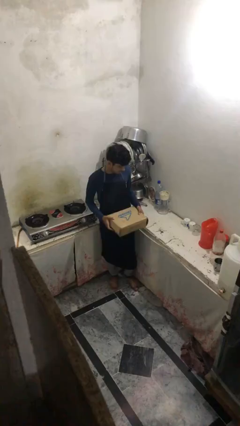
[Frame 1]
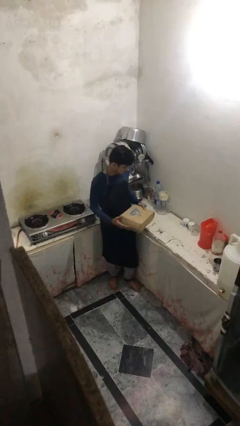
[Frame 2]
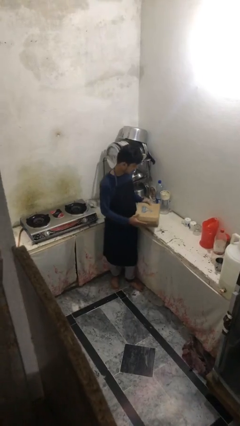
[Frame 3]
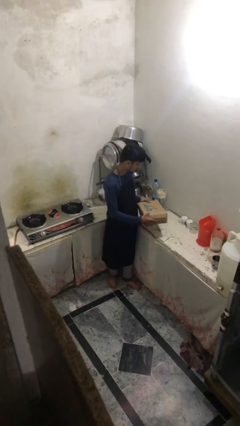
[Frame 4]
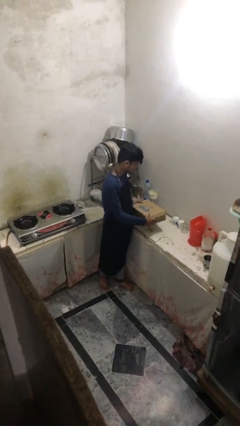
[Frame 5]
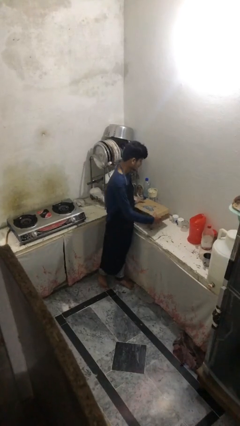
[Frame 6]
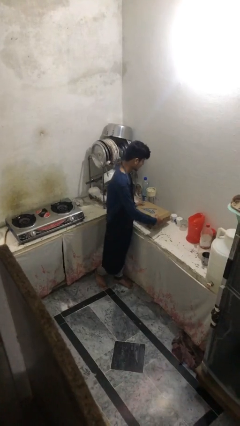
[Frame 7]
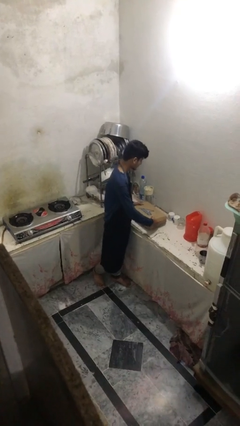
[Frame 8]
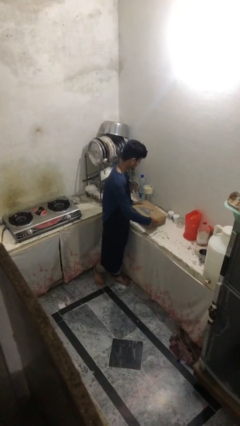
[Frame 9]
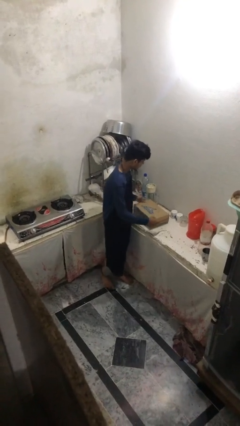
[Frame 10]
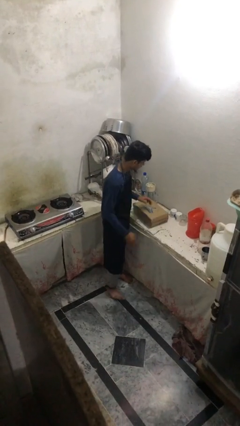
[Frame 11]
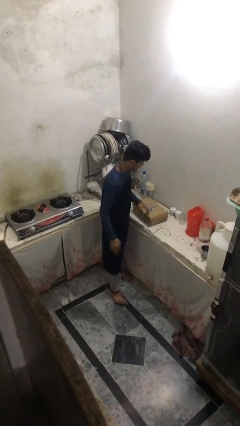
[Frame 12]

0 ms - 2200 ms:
person puts down object on table

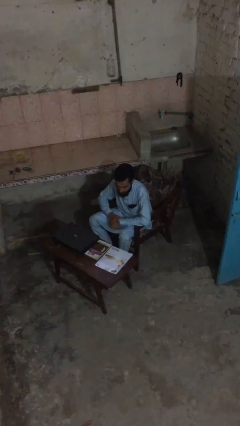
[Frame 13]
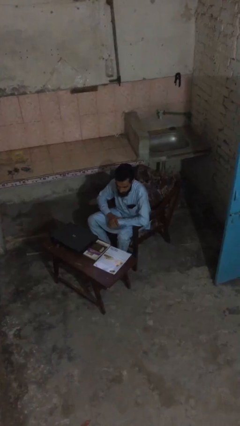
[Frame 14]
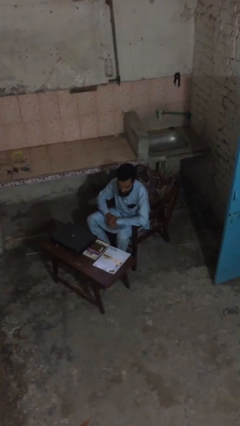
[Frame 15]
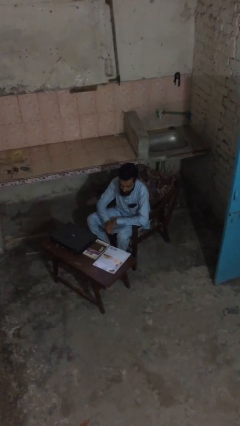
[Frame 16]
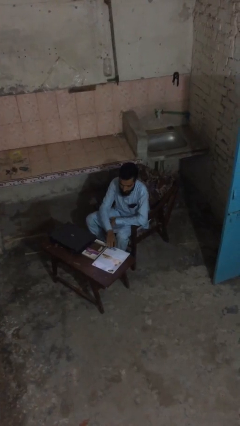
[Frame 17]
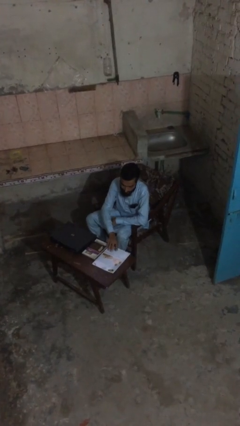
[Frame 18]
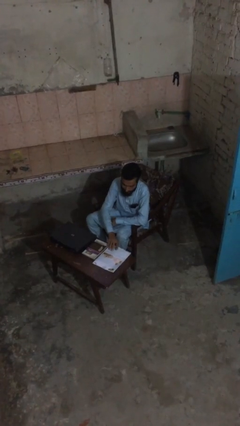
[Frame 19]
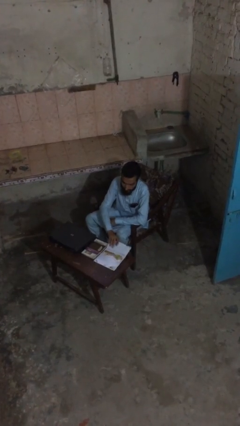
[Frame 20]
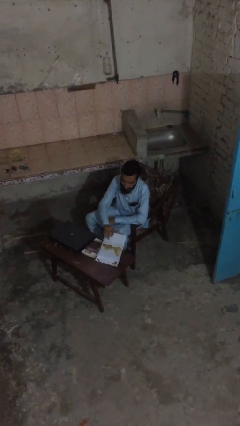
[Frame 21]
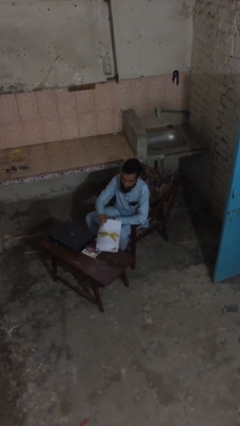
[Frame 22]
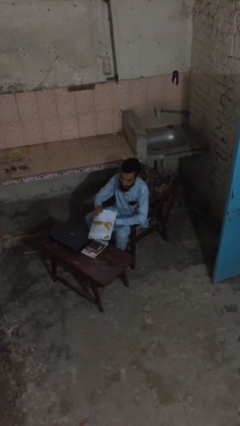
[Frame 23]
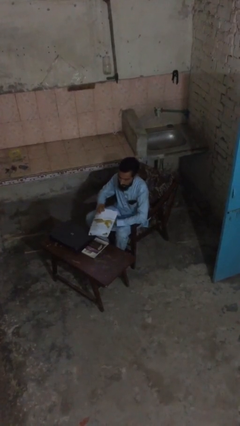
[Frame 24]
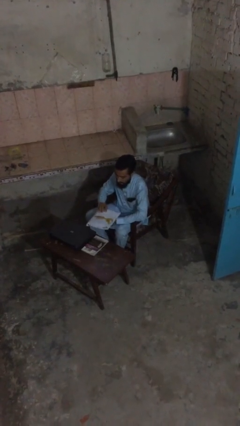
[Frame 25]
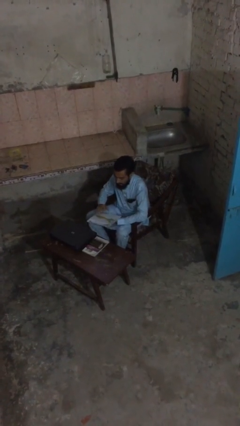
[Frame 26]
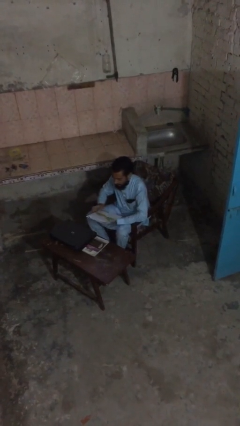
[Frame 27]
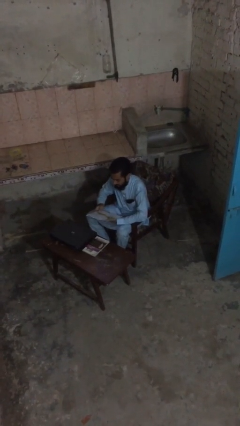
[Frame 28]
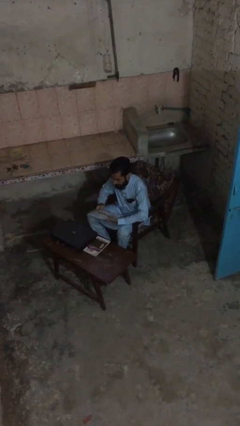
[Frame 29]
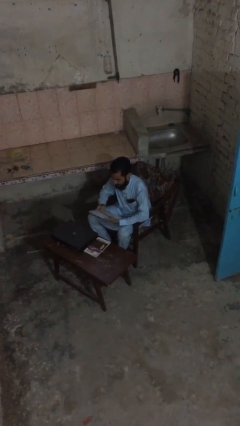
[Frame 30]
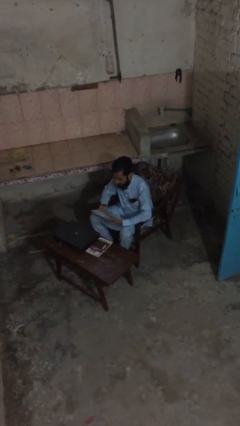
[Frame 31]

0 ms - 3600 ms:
person picks up object from table

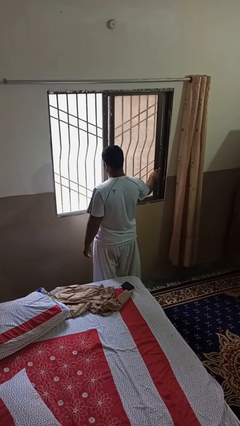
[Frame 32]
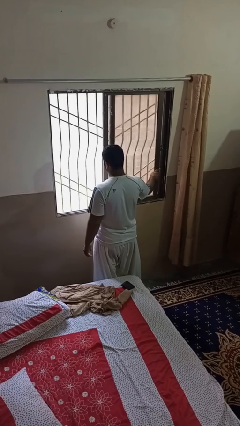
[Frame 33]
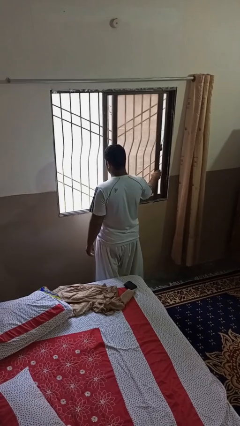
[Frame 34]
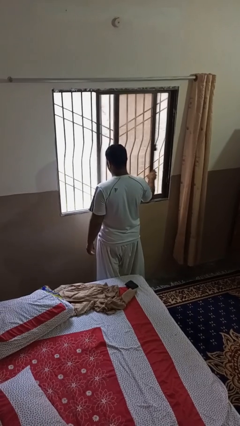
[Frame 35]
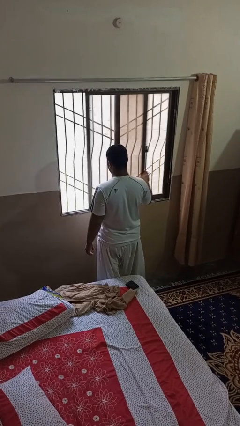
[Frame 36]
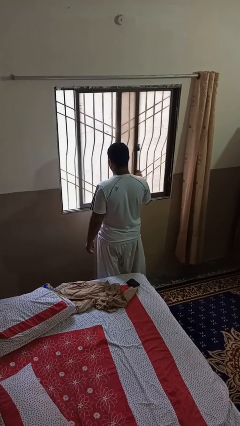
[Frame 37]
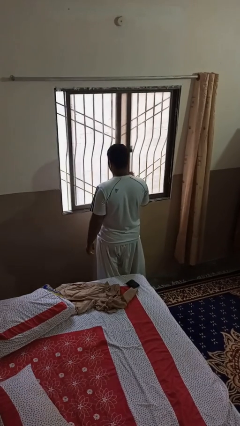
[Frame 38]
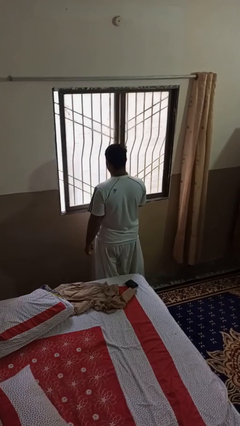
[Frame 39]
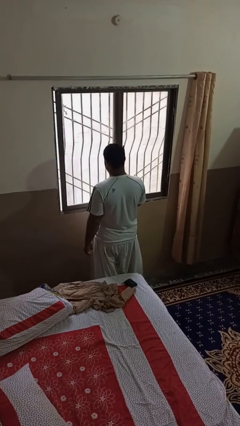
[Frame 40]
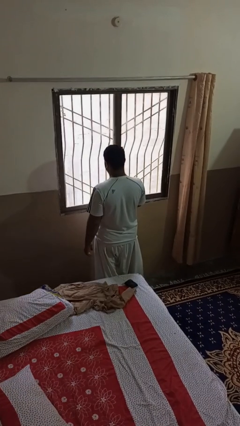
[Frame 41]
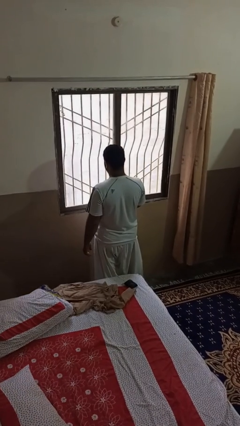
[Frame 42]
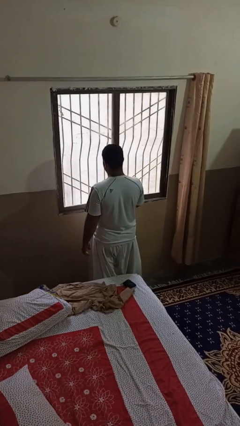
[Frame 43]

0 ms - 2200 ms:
person closes home window

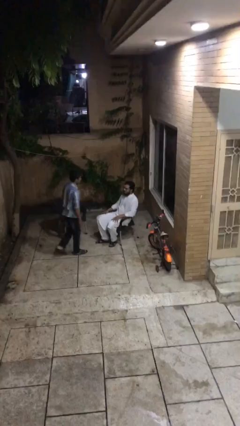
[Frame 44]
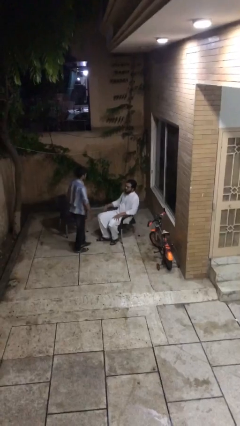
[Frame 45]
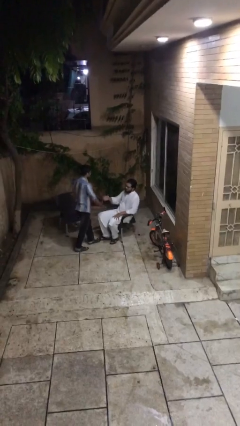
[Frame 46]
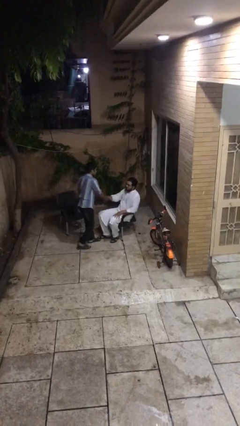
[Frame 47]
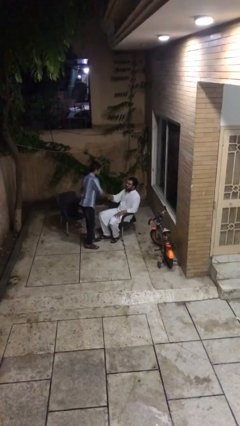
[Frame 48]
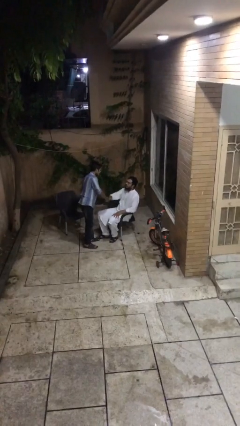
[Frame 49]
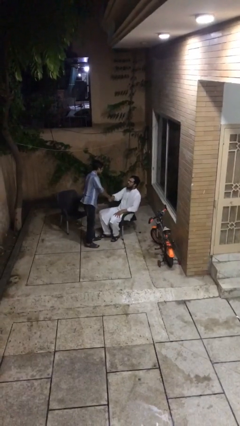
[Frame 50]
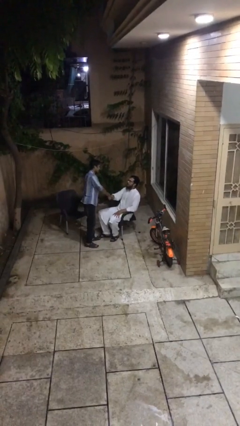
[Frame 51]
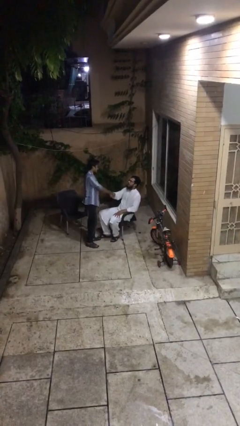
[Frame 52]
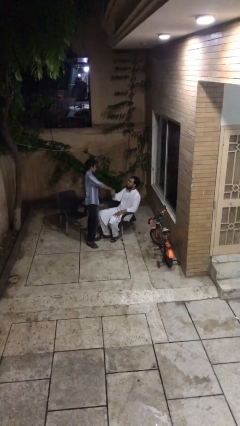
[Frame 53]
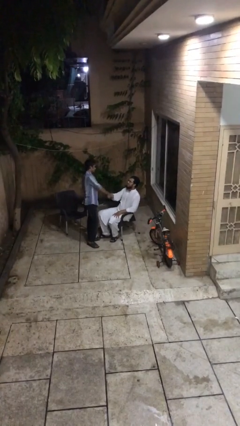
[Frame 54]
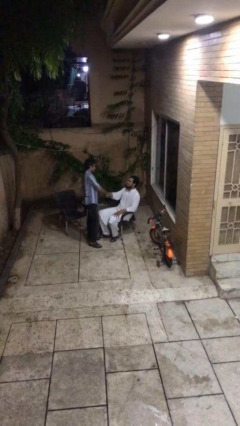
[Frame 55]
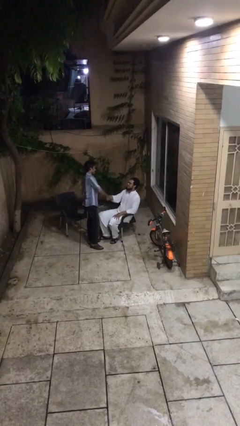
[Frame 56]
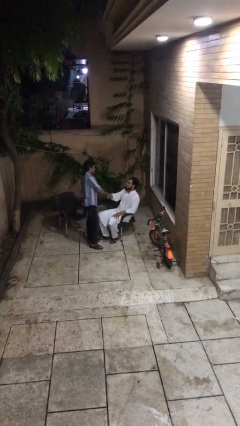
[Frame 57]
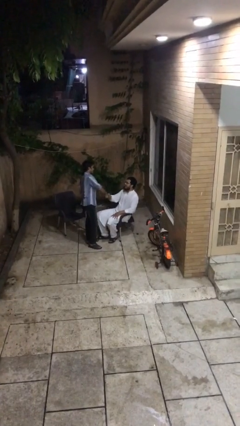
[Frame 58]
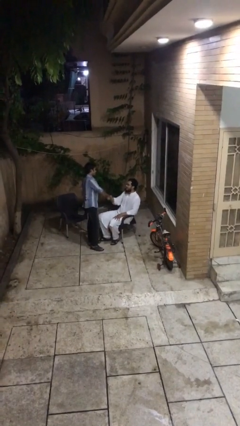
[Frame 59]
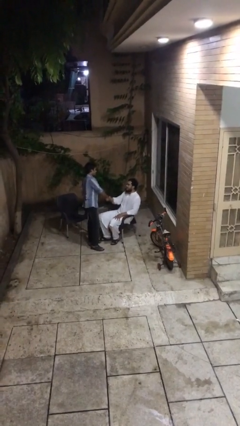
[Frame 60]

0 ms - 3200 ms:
person shakes hand

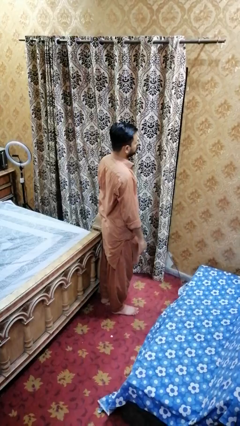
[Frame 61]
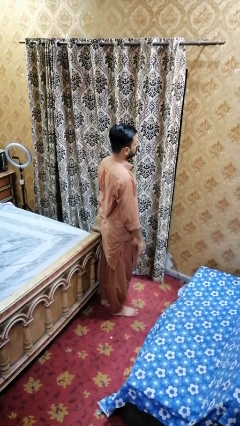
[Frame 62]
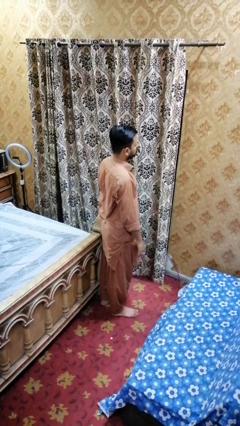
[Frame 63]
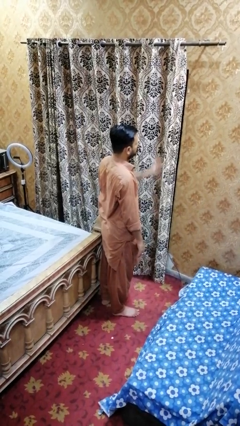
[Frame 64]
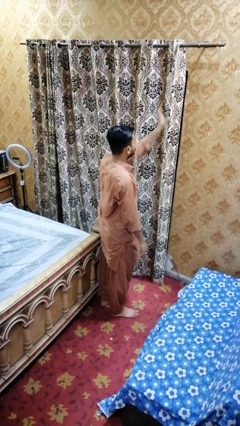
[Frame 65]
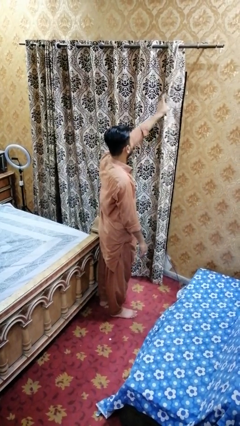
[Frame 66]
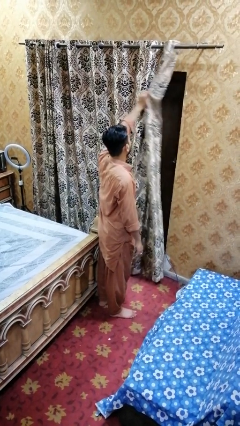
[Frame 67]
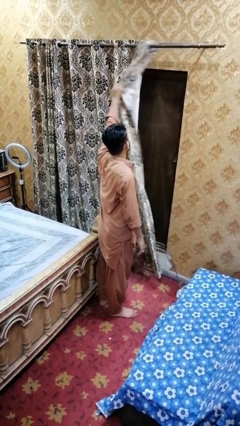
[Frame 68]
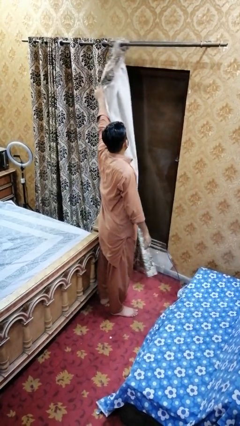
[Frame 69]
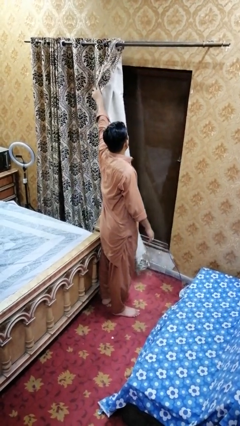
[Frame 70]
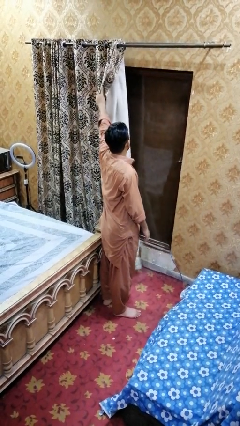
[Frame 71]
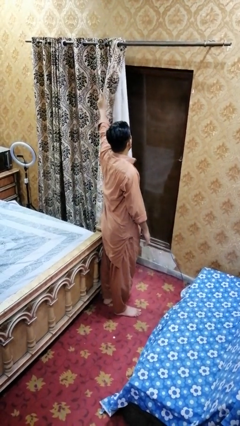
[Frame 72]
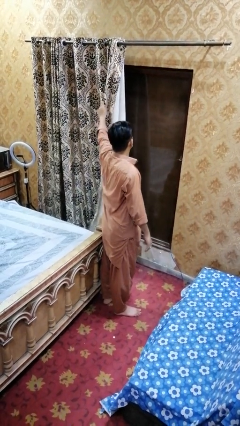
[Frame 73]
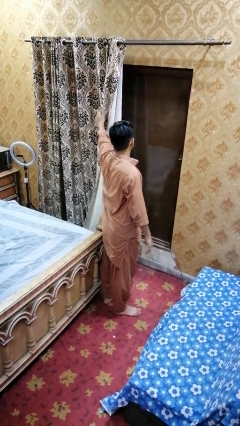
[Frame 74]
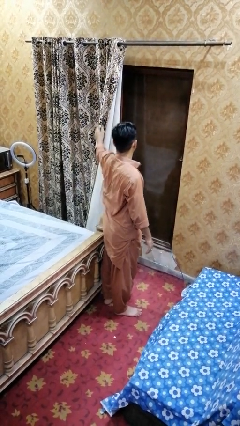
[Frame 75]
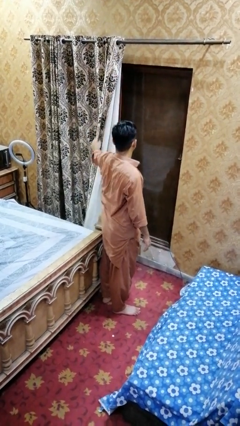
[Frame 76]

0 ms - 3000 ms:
person opens curtains

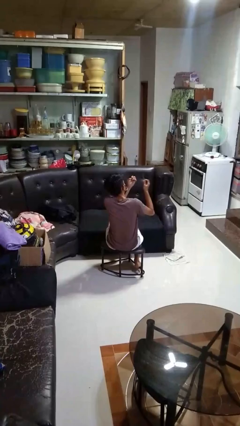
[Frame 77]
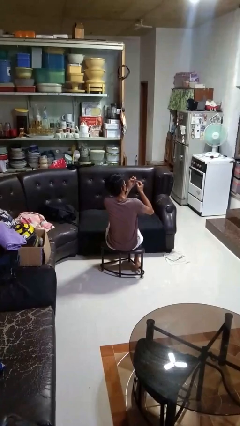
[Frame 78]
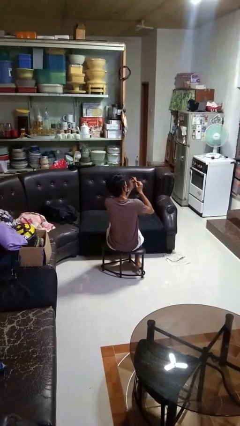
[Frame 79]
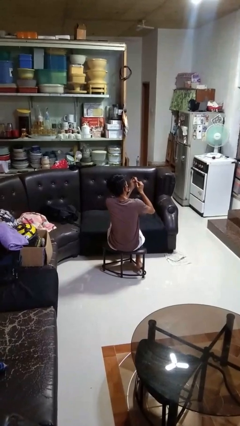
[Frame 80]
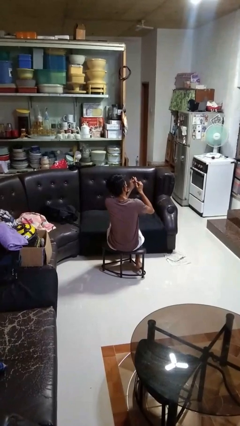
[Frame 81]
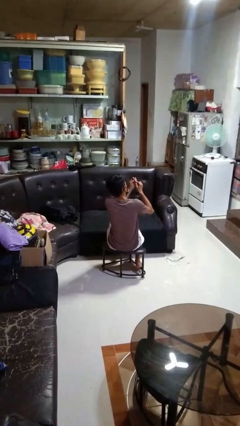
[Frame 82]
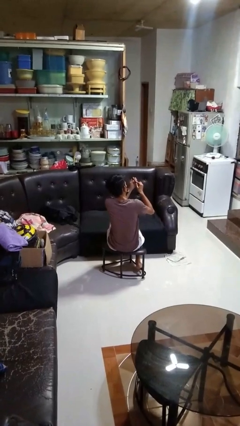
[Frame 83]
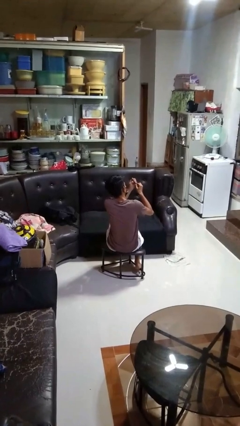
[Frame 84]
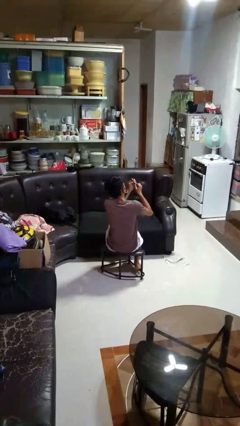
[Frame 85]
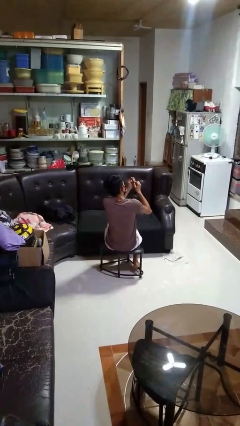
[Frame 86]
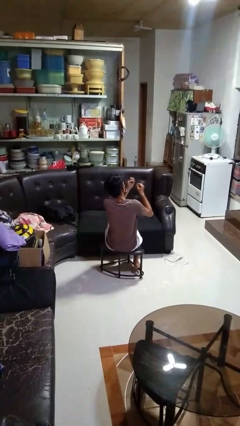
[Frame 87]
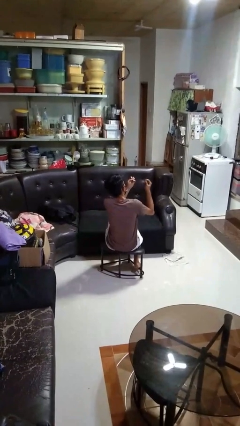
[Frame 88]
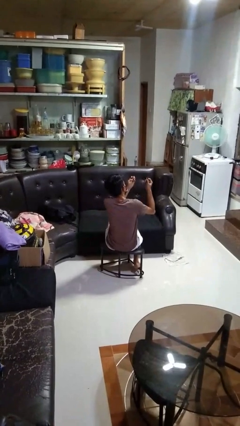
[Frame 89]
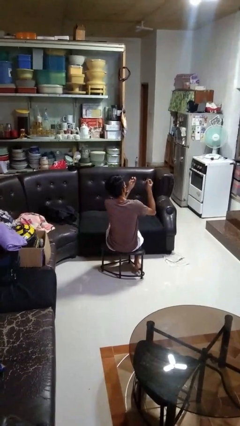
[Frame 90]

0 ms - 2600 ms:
person files fingernails

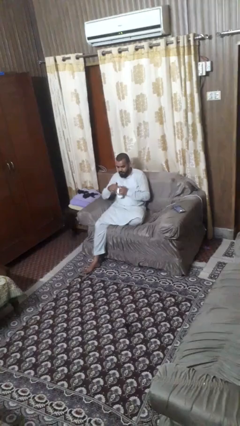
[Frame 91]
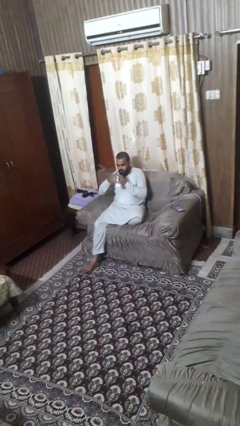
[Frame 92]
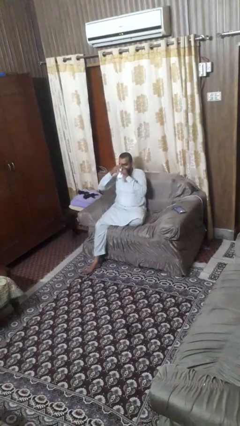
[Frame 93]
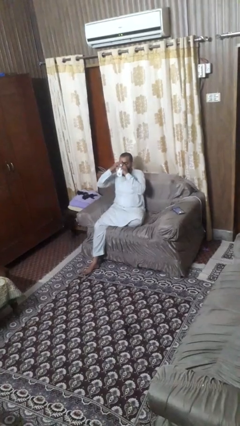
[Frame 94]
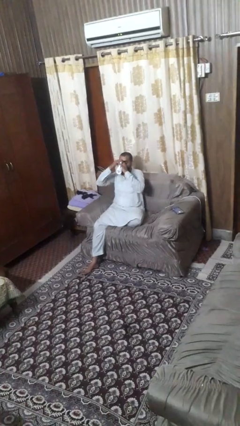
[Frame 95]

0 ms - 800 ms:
person stirs mug
